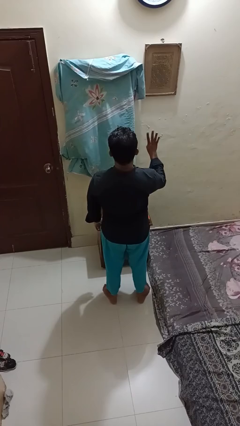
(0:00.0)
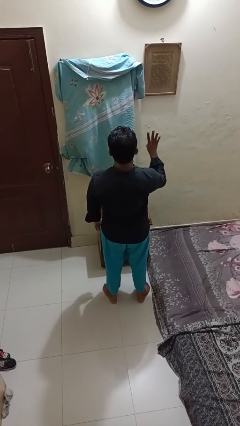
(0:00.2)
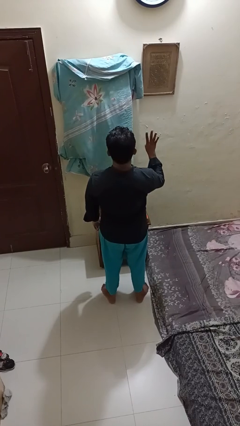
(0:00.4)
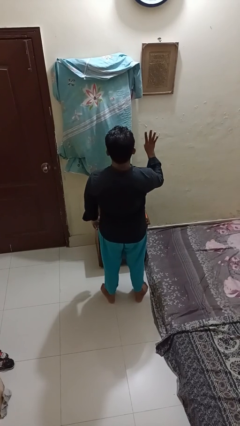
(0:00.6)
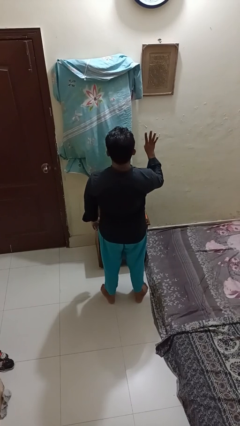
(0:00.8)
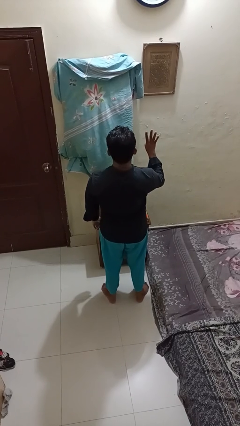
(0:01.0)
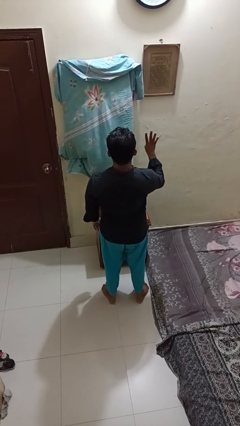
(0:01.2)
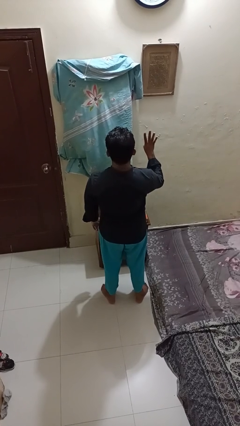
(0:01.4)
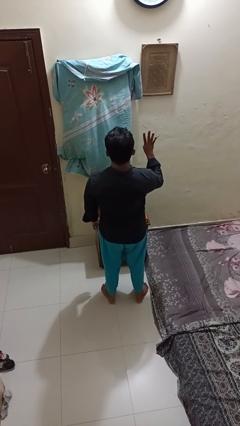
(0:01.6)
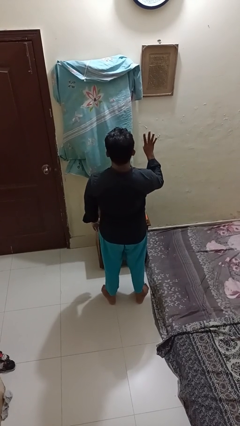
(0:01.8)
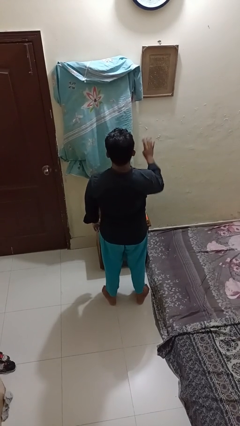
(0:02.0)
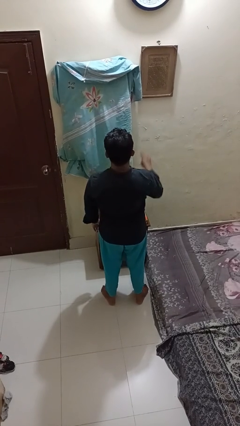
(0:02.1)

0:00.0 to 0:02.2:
person gestures number four
